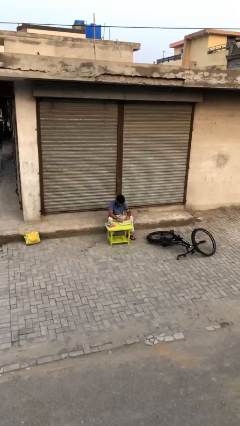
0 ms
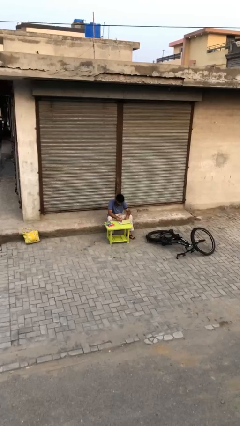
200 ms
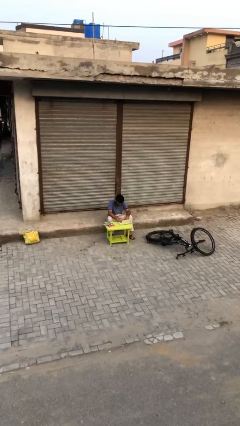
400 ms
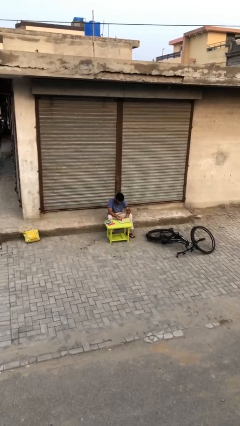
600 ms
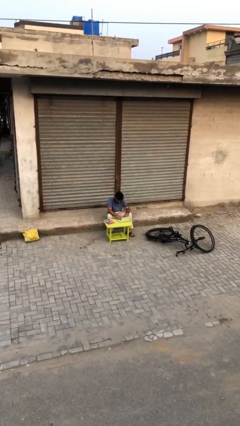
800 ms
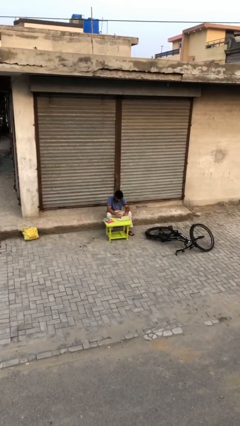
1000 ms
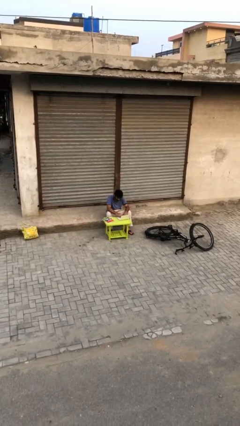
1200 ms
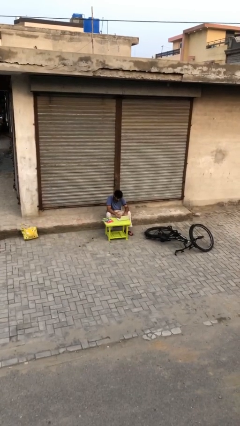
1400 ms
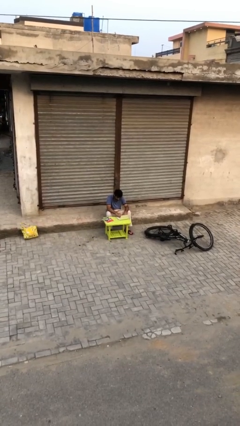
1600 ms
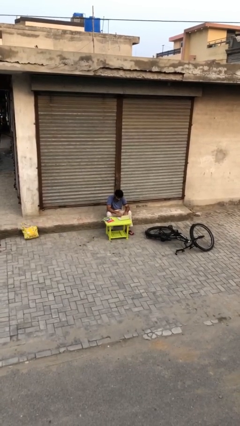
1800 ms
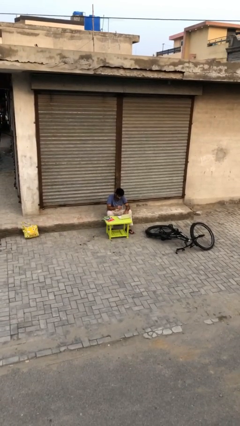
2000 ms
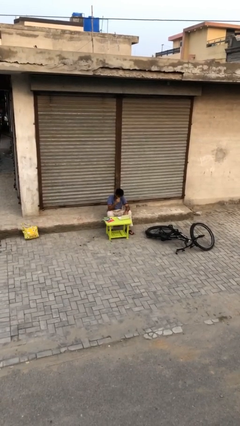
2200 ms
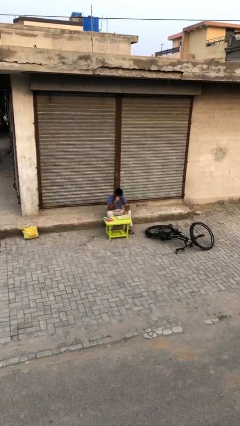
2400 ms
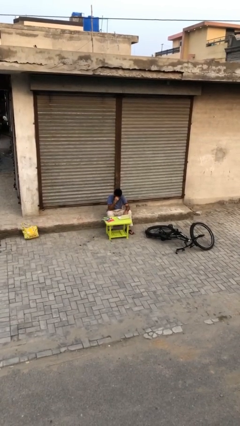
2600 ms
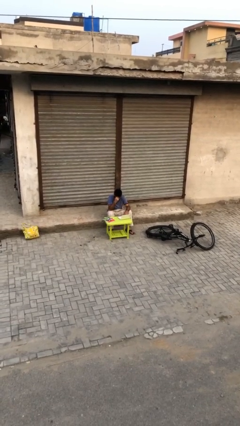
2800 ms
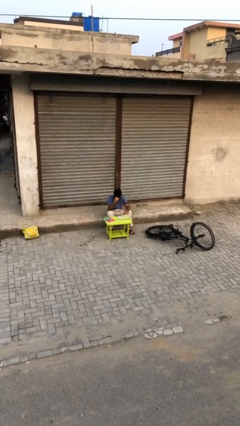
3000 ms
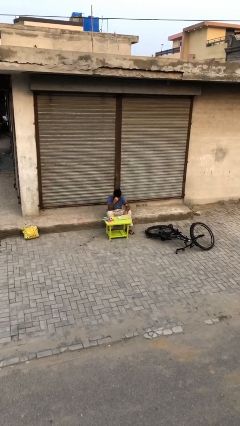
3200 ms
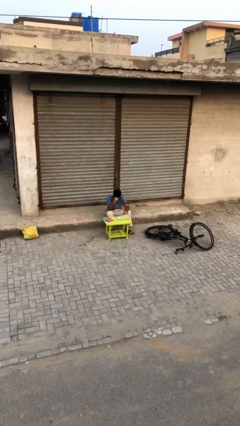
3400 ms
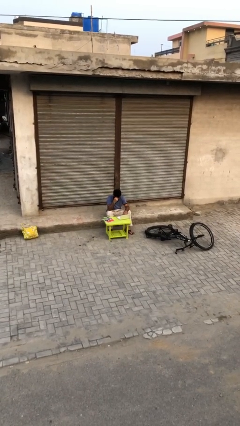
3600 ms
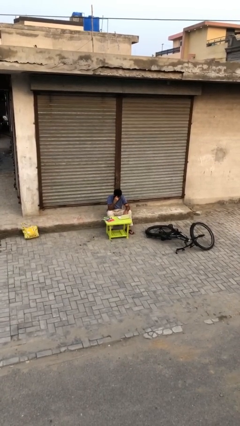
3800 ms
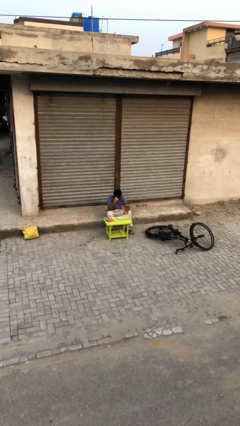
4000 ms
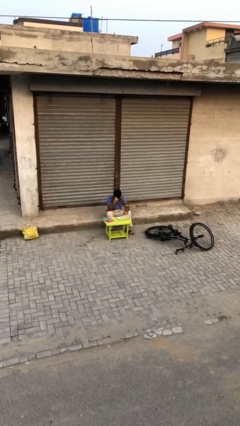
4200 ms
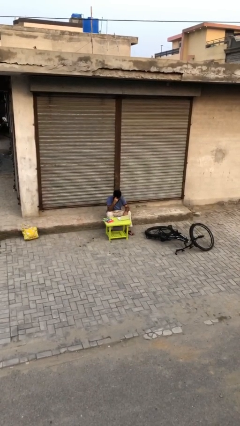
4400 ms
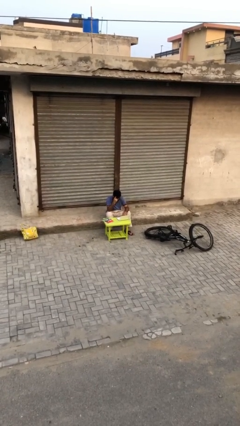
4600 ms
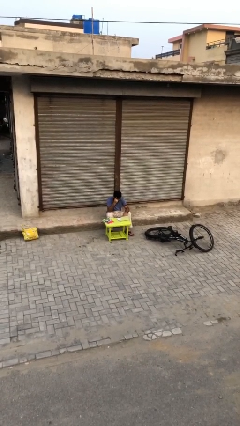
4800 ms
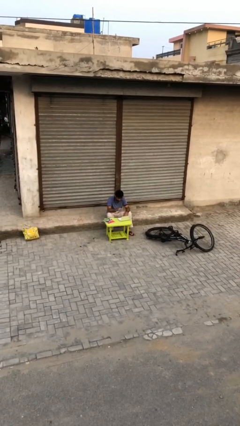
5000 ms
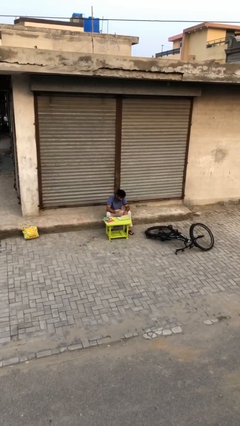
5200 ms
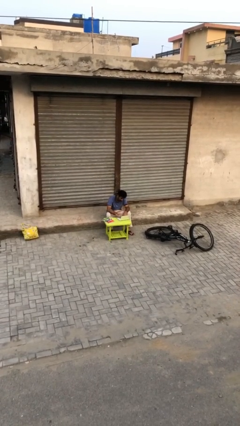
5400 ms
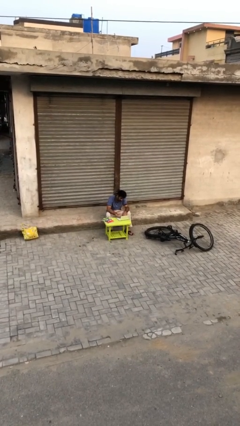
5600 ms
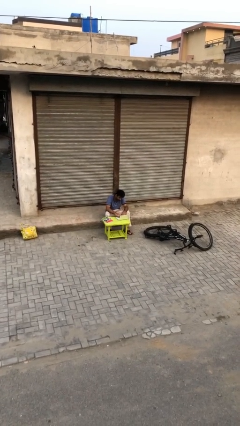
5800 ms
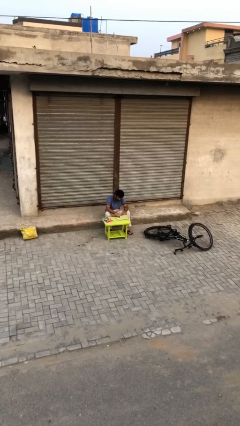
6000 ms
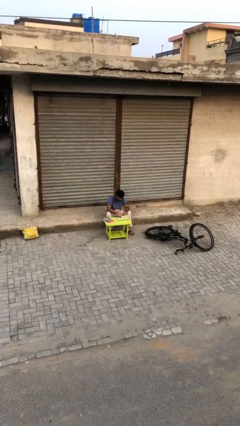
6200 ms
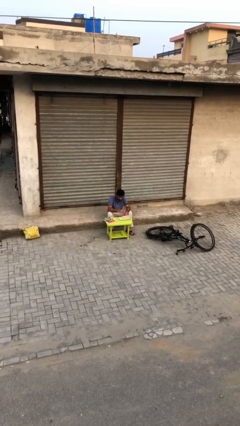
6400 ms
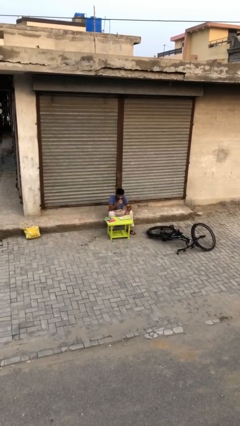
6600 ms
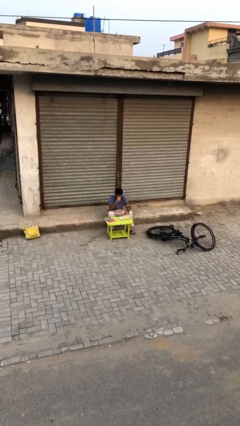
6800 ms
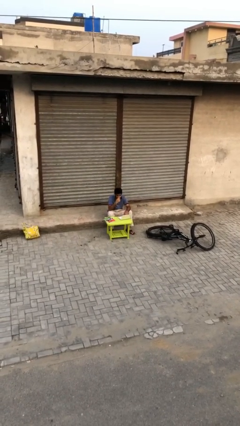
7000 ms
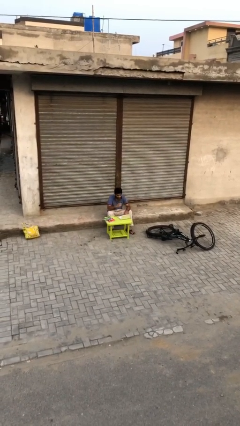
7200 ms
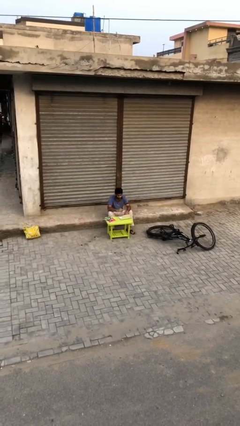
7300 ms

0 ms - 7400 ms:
person interacts with laptop

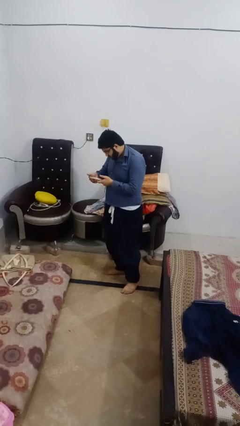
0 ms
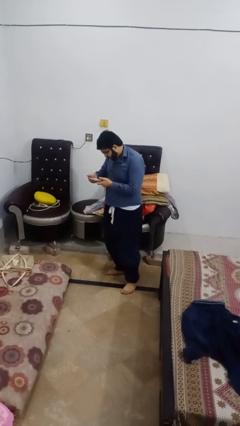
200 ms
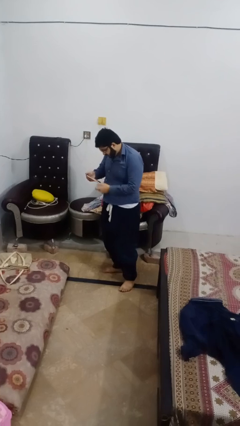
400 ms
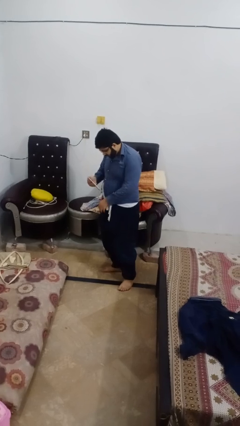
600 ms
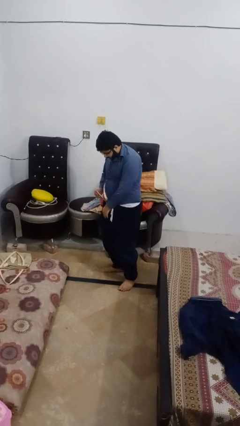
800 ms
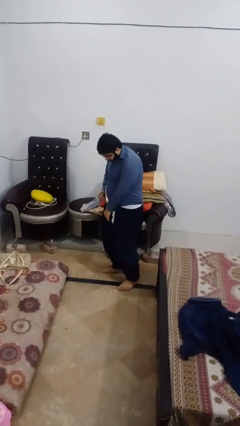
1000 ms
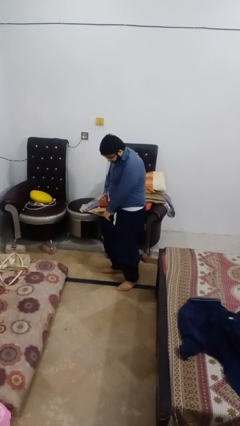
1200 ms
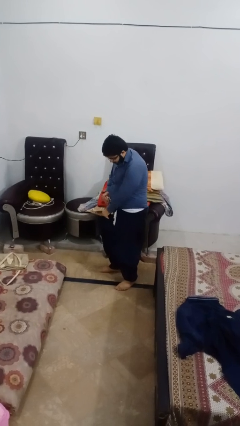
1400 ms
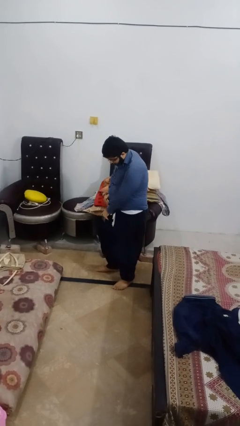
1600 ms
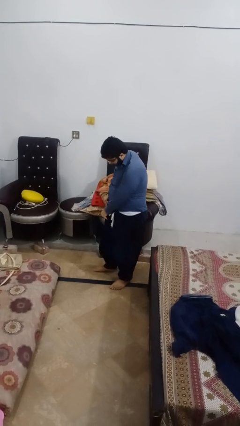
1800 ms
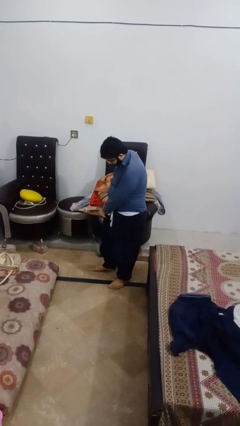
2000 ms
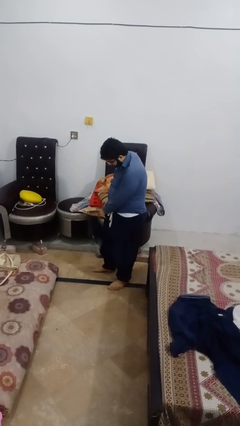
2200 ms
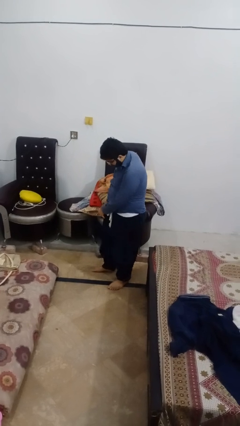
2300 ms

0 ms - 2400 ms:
person puts phone into pocket

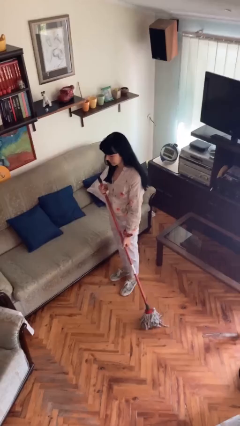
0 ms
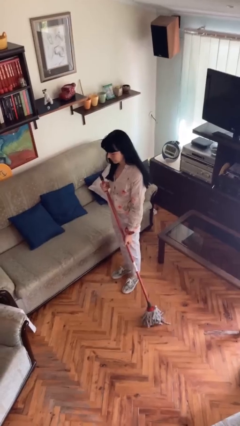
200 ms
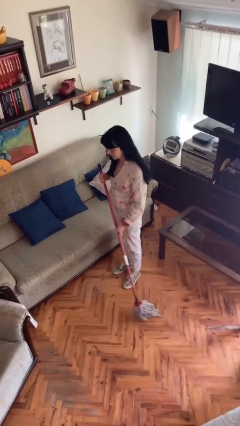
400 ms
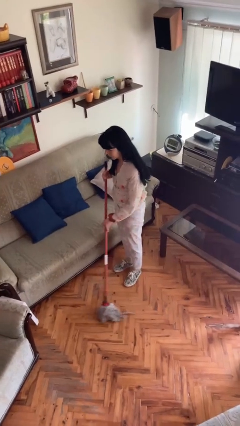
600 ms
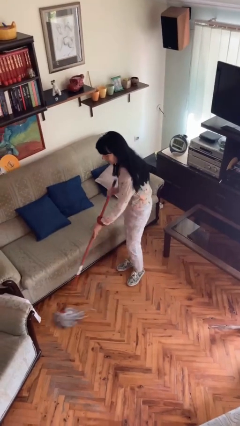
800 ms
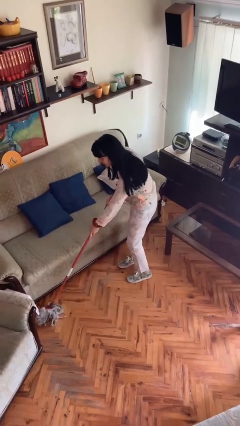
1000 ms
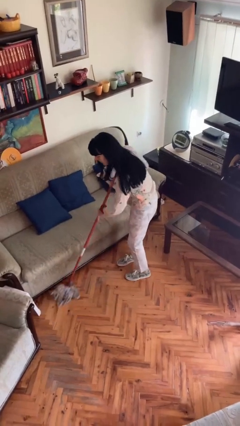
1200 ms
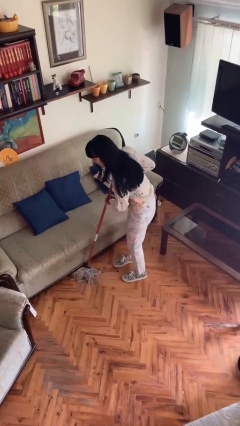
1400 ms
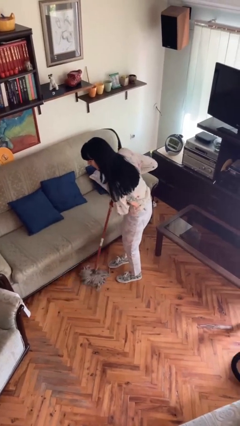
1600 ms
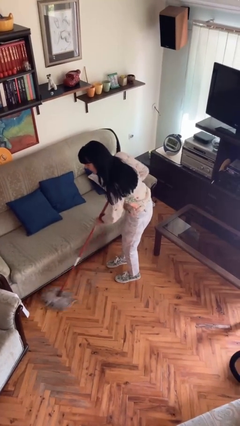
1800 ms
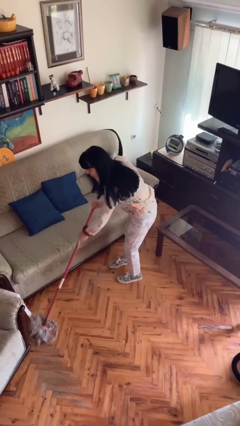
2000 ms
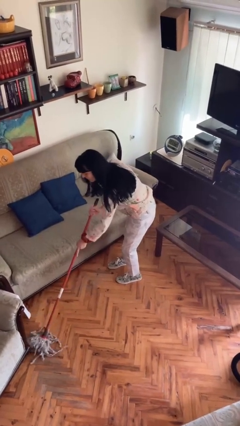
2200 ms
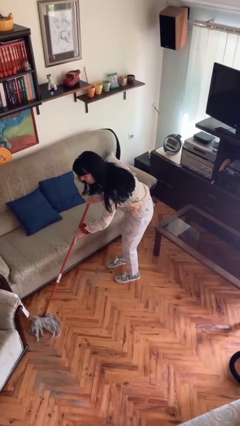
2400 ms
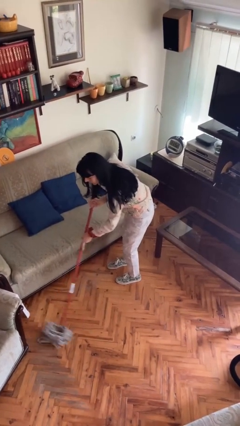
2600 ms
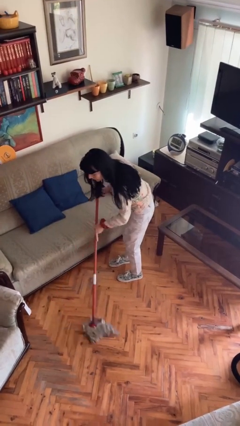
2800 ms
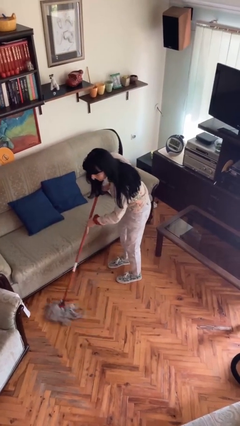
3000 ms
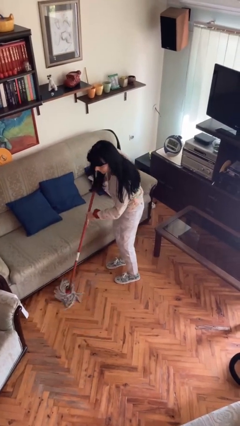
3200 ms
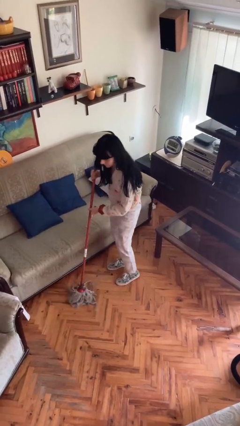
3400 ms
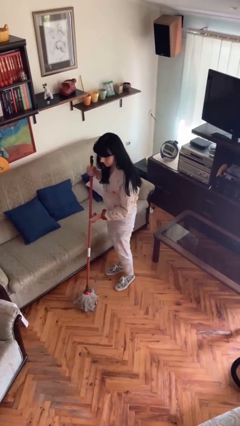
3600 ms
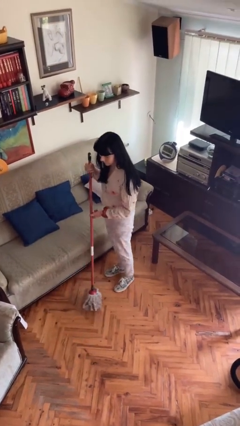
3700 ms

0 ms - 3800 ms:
person sweeps floor

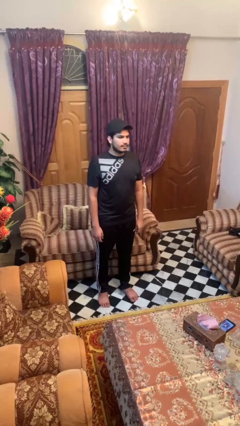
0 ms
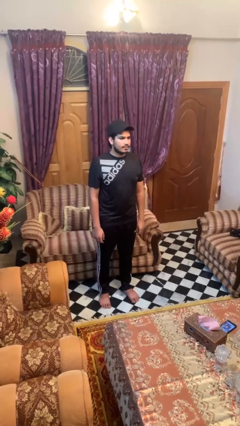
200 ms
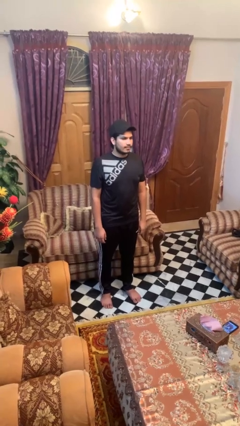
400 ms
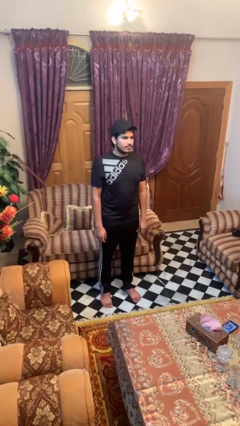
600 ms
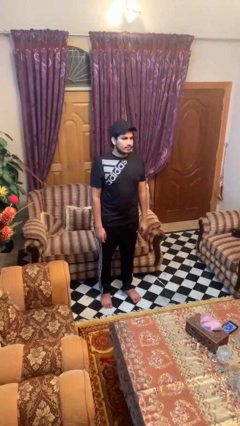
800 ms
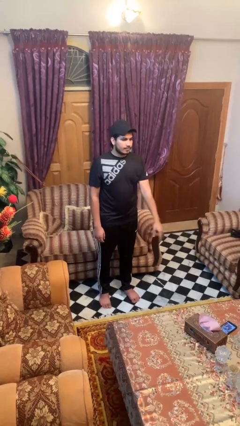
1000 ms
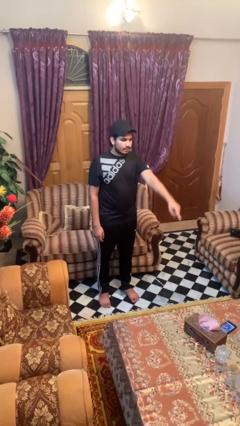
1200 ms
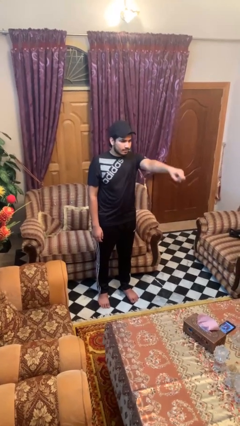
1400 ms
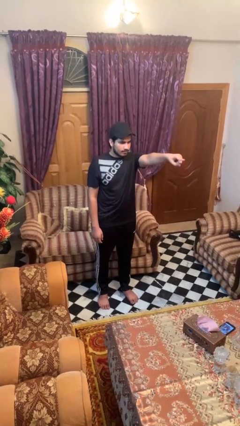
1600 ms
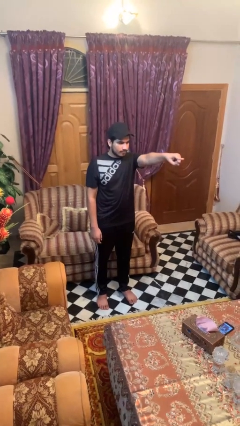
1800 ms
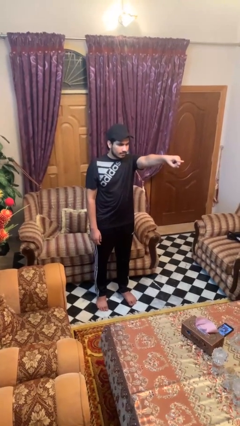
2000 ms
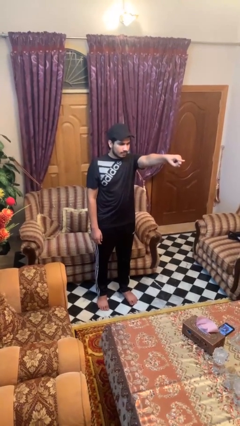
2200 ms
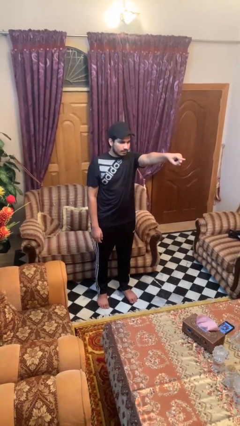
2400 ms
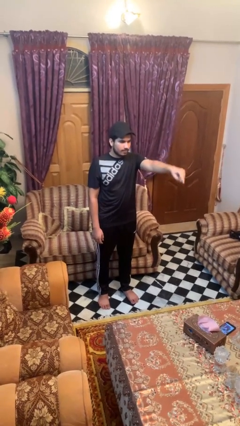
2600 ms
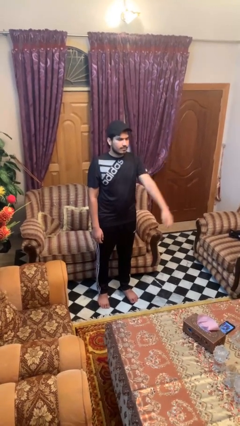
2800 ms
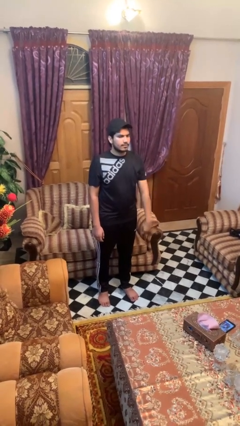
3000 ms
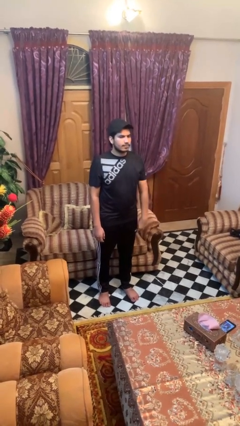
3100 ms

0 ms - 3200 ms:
person points at person

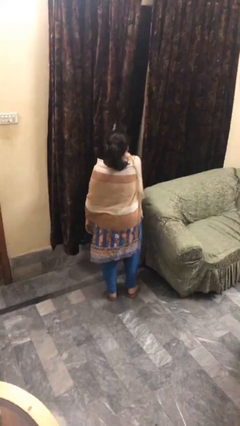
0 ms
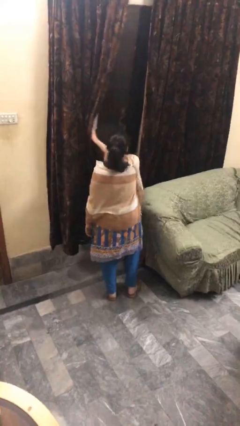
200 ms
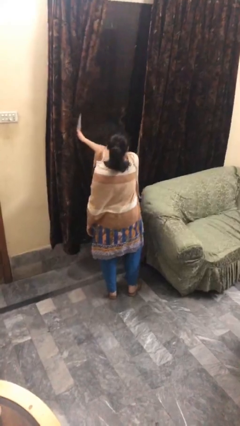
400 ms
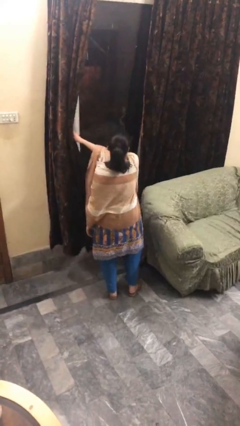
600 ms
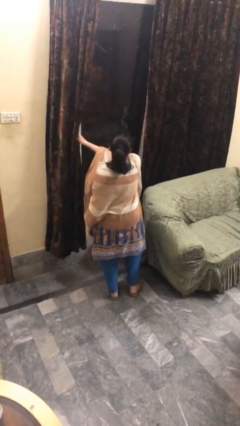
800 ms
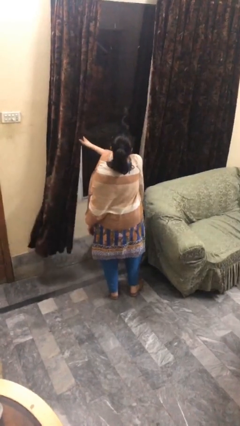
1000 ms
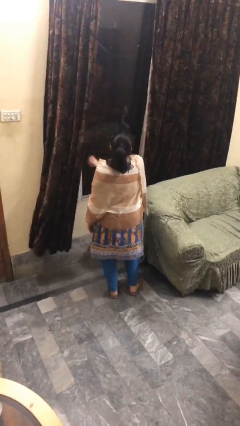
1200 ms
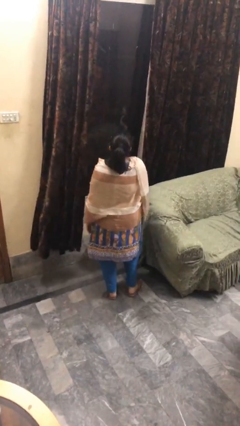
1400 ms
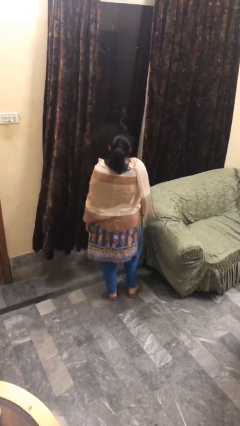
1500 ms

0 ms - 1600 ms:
person opens curtains
